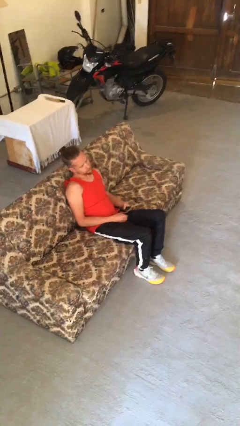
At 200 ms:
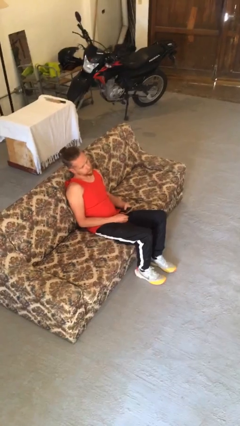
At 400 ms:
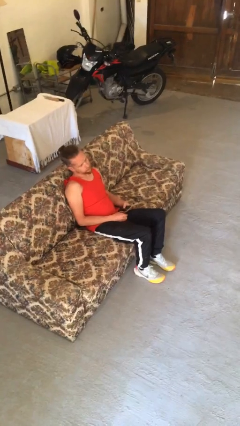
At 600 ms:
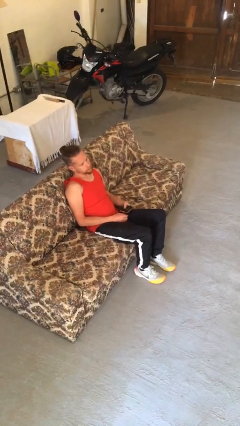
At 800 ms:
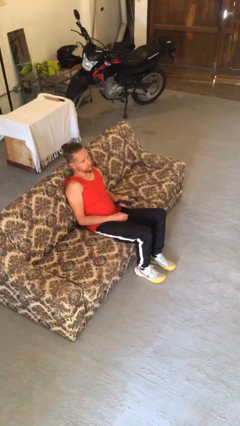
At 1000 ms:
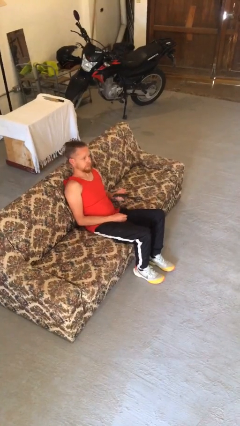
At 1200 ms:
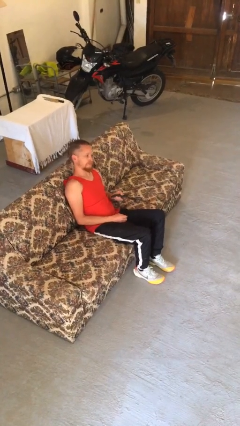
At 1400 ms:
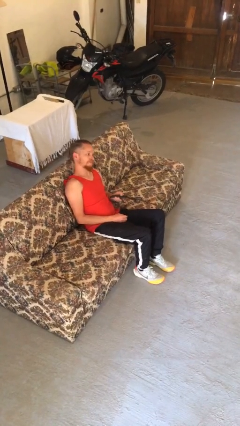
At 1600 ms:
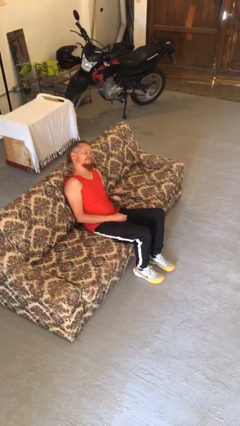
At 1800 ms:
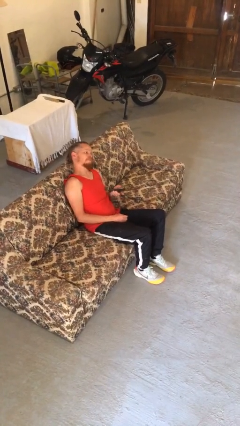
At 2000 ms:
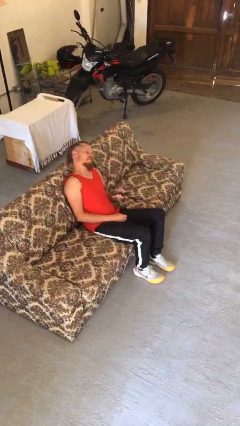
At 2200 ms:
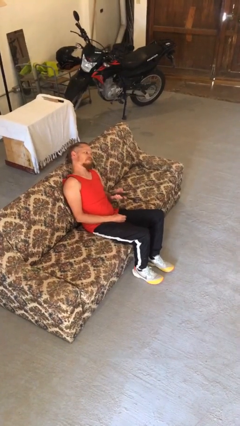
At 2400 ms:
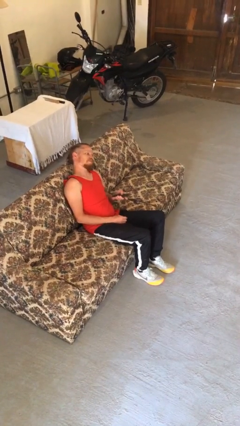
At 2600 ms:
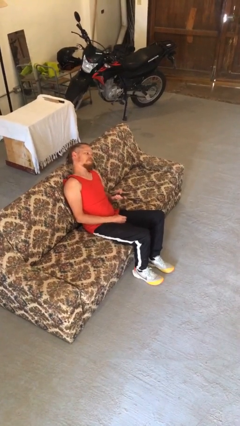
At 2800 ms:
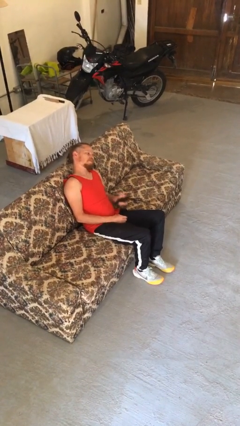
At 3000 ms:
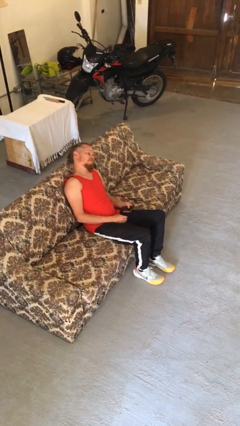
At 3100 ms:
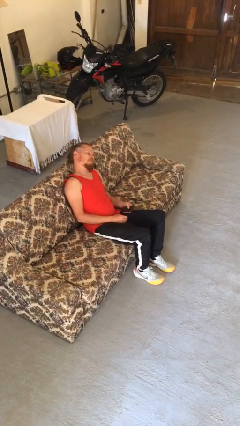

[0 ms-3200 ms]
person uses television remote

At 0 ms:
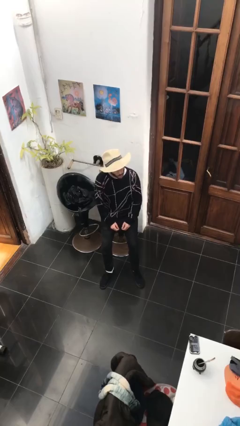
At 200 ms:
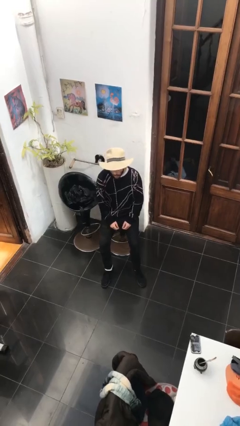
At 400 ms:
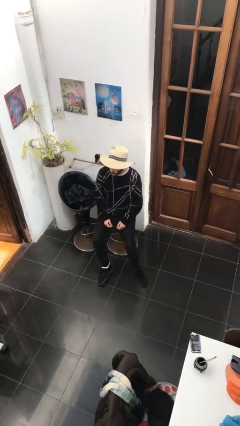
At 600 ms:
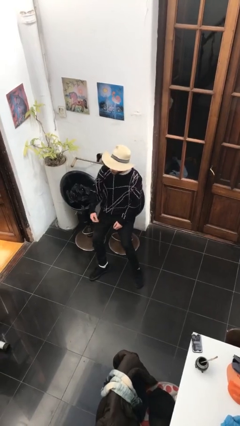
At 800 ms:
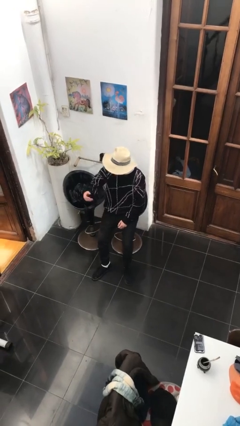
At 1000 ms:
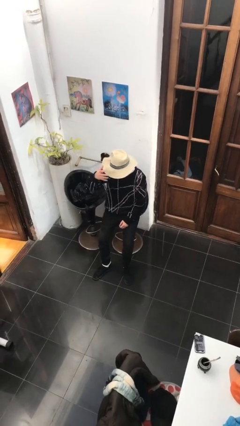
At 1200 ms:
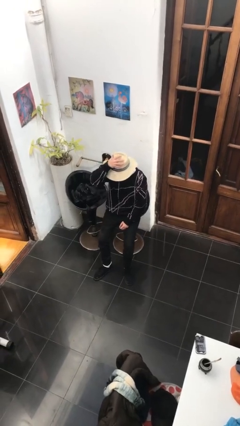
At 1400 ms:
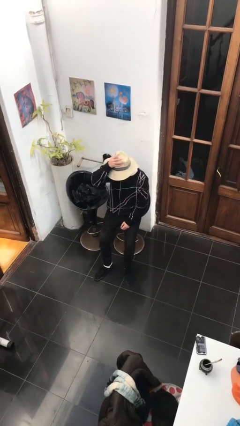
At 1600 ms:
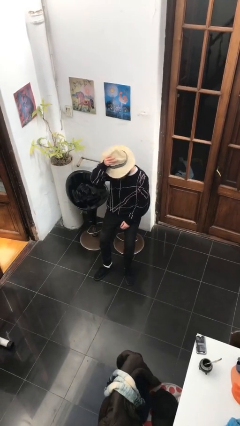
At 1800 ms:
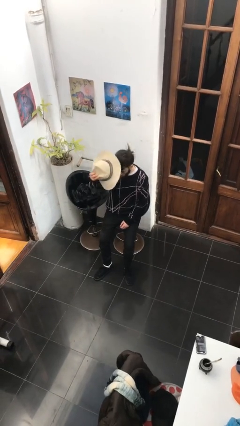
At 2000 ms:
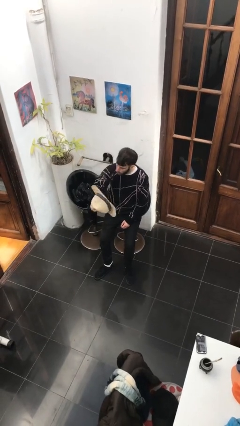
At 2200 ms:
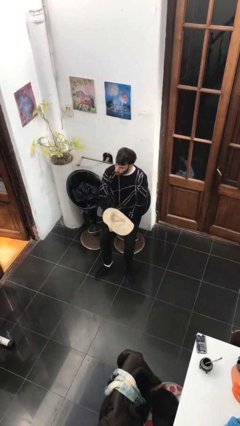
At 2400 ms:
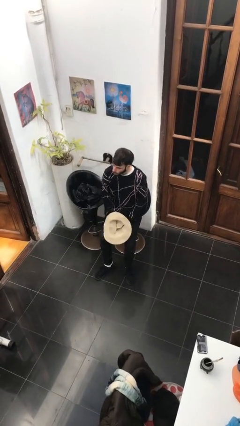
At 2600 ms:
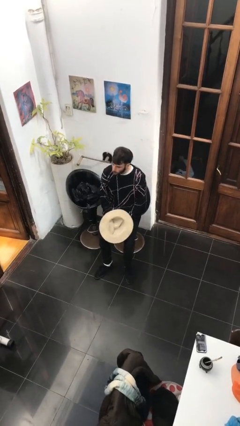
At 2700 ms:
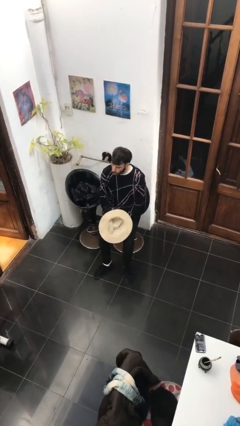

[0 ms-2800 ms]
person takes off hat

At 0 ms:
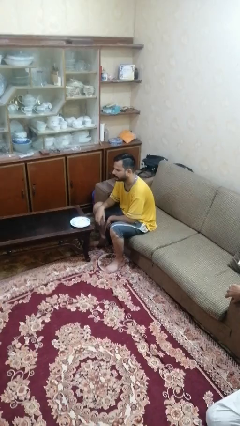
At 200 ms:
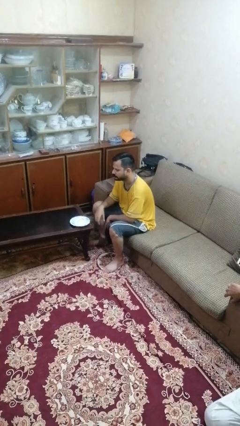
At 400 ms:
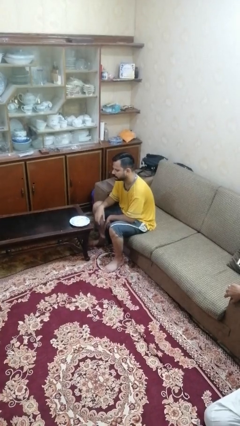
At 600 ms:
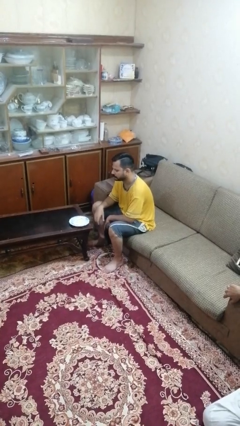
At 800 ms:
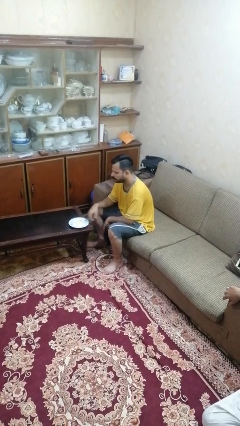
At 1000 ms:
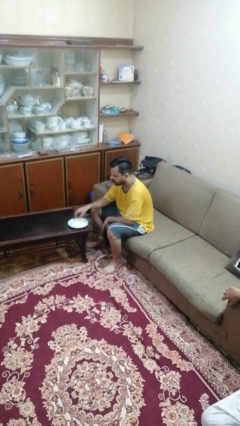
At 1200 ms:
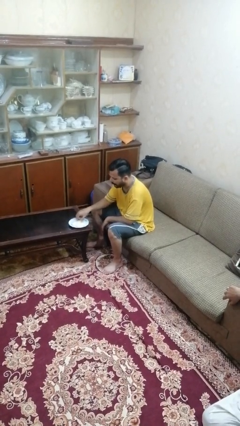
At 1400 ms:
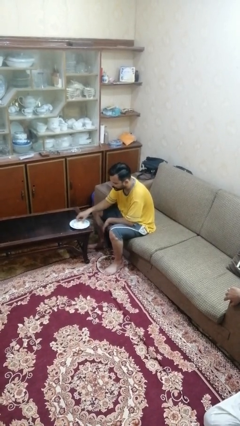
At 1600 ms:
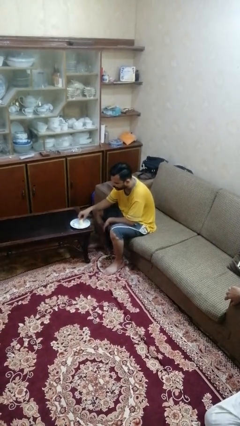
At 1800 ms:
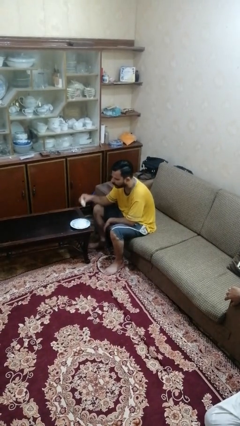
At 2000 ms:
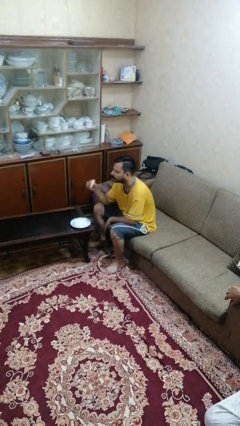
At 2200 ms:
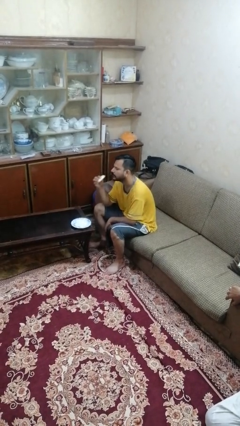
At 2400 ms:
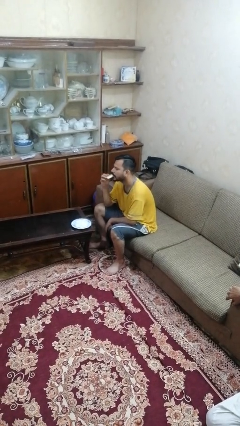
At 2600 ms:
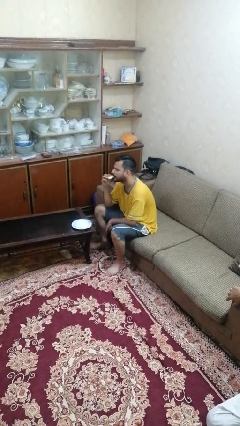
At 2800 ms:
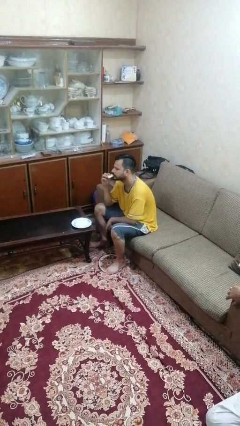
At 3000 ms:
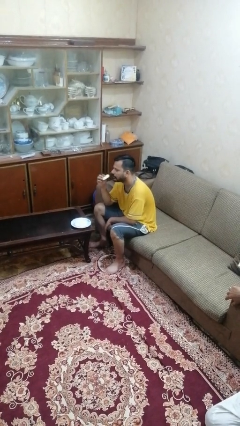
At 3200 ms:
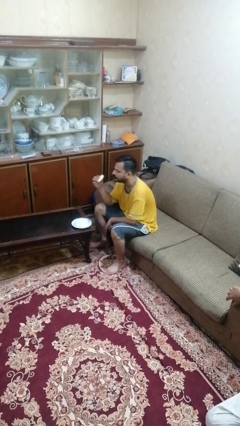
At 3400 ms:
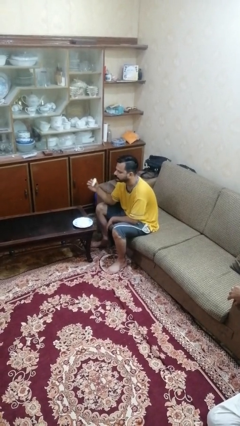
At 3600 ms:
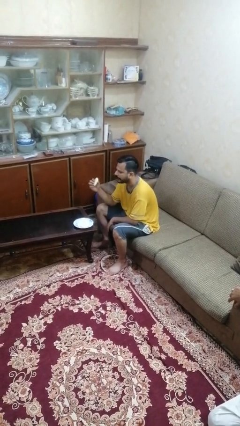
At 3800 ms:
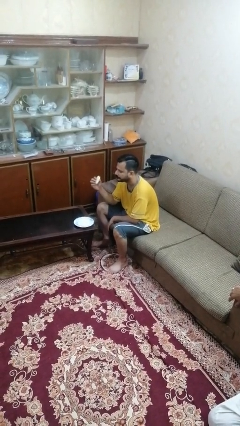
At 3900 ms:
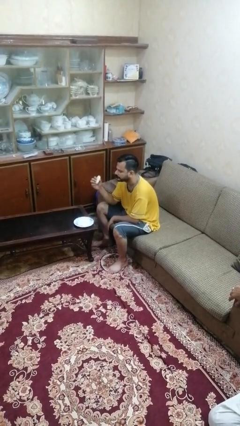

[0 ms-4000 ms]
person eats with hands

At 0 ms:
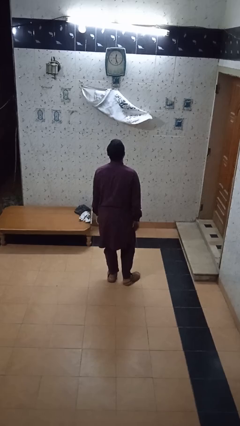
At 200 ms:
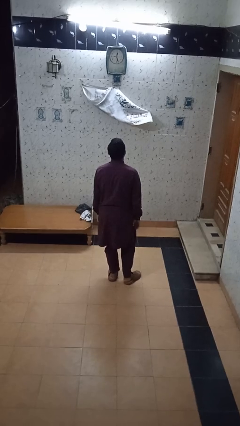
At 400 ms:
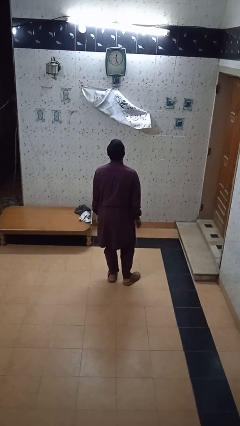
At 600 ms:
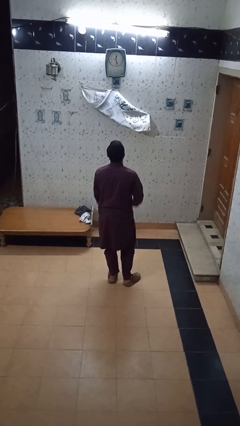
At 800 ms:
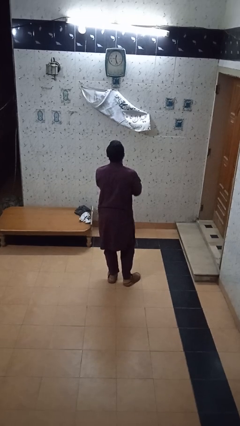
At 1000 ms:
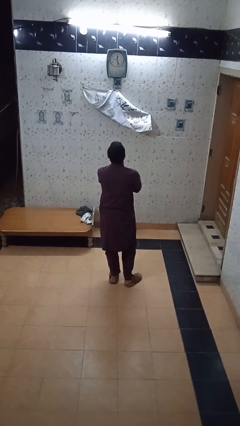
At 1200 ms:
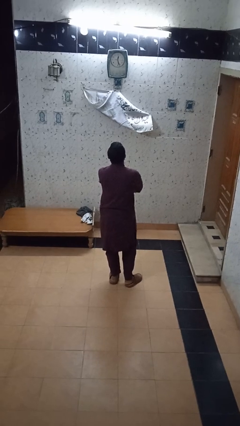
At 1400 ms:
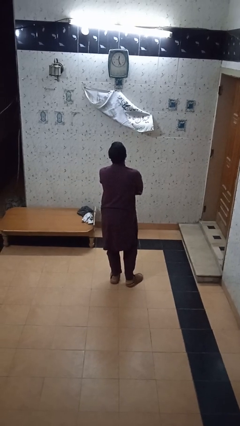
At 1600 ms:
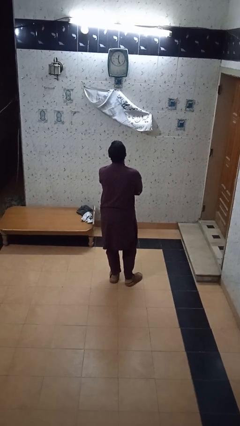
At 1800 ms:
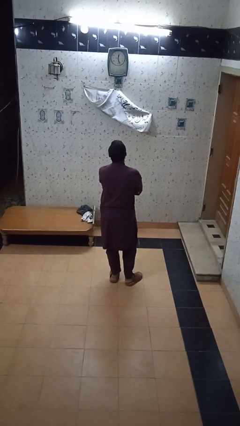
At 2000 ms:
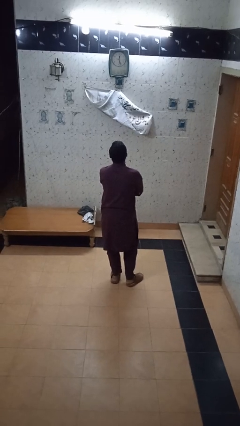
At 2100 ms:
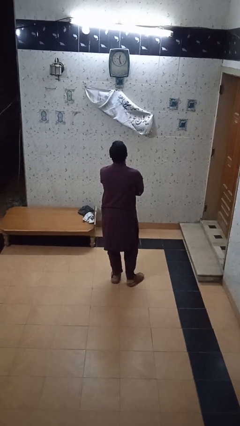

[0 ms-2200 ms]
person crosses arms

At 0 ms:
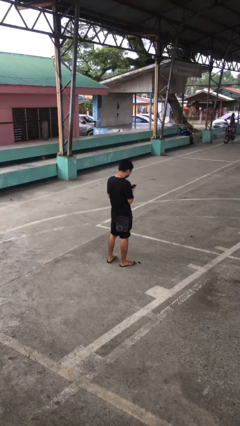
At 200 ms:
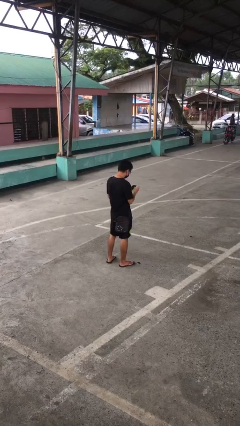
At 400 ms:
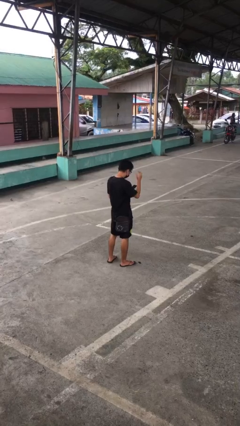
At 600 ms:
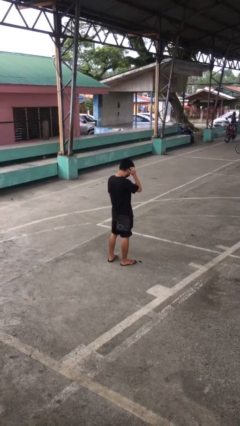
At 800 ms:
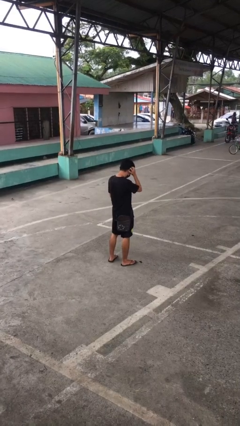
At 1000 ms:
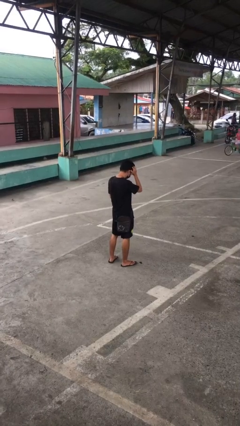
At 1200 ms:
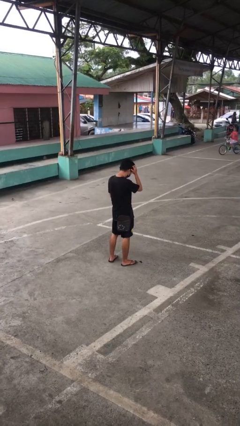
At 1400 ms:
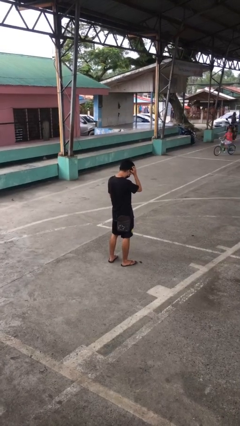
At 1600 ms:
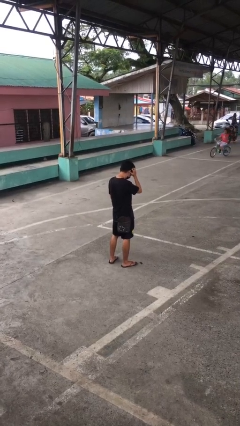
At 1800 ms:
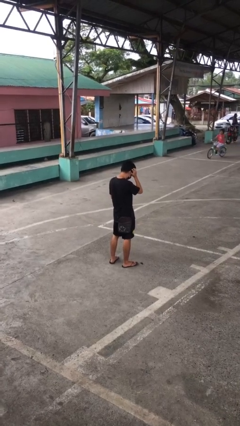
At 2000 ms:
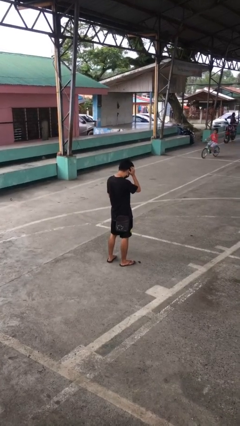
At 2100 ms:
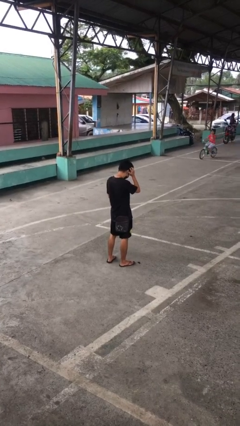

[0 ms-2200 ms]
person scratches face

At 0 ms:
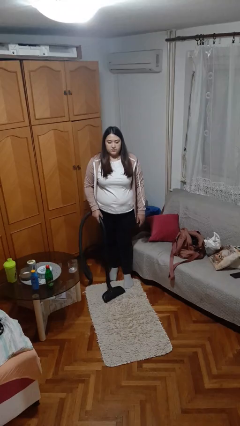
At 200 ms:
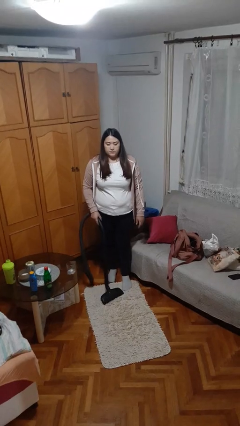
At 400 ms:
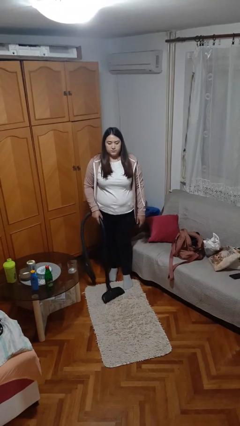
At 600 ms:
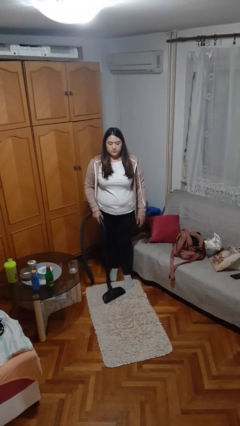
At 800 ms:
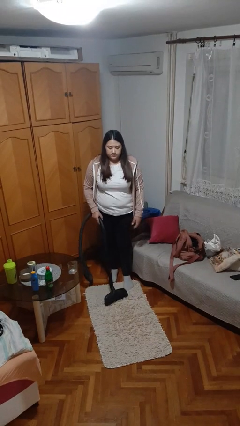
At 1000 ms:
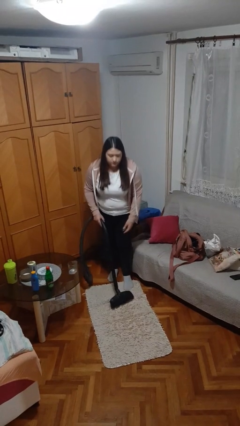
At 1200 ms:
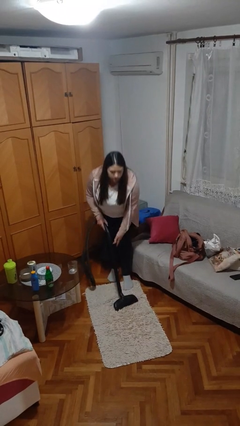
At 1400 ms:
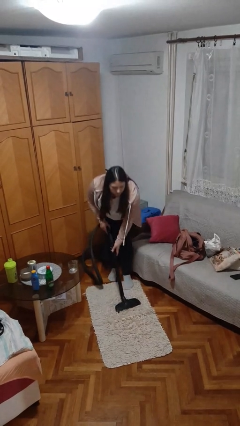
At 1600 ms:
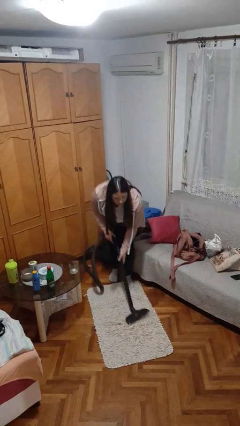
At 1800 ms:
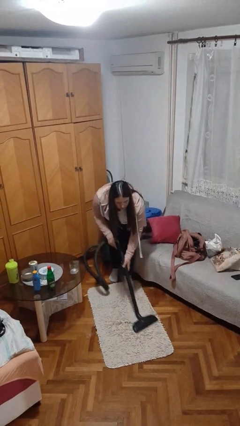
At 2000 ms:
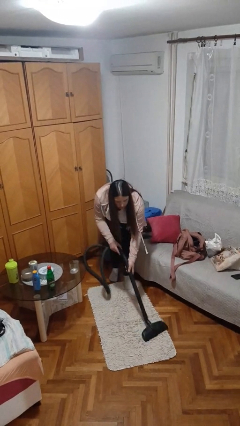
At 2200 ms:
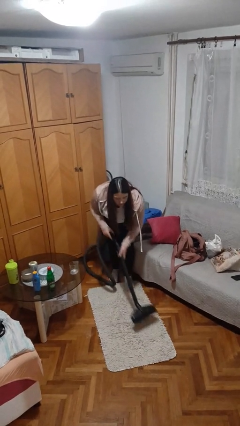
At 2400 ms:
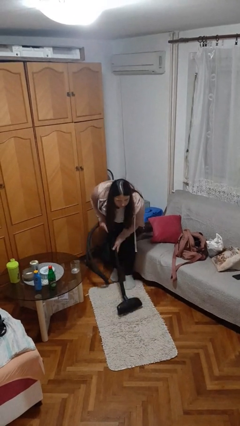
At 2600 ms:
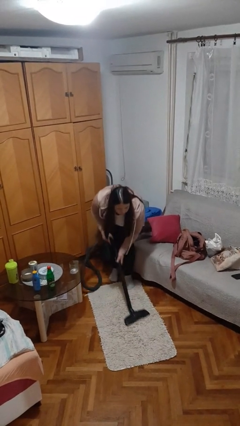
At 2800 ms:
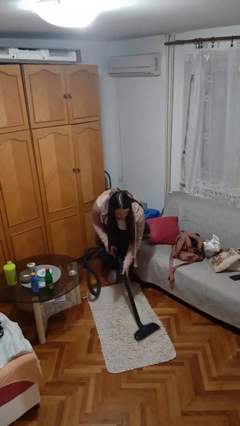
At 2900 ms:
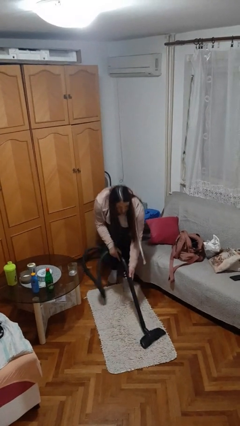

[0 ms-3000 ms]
person vacuums carpet
